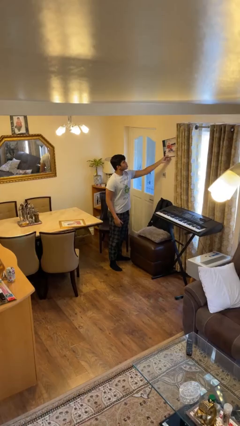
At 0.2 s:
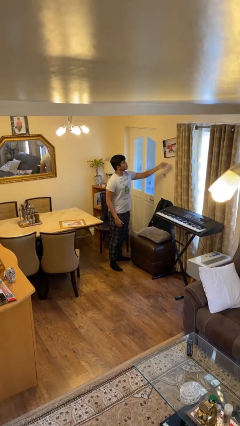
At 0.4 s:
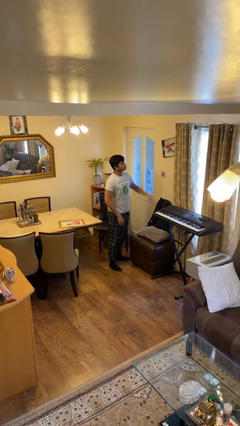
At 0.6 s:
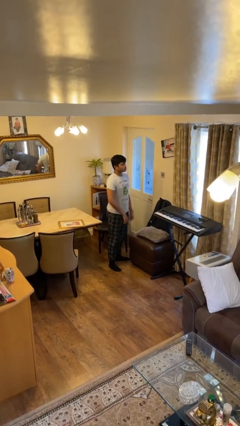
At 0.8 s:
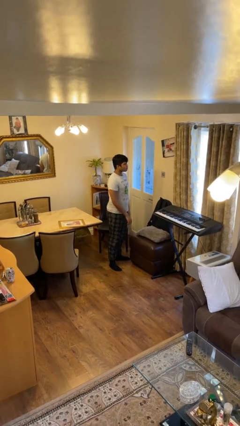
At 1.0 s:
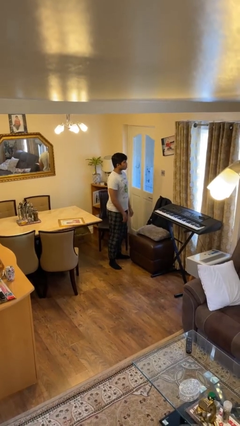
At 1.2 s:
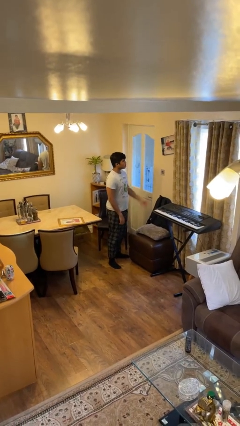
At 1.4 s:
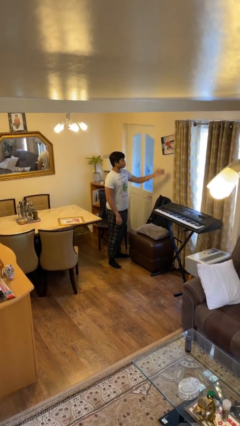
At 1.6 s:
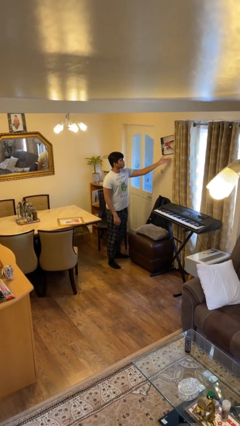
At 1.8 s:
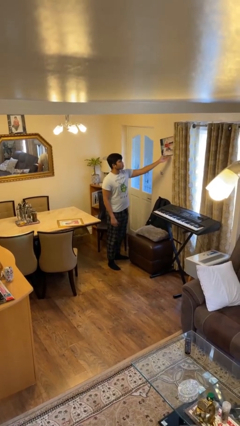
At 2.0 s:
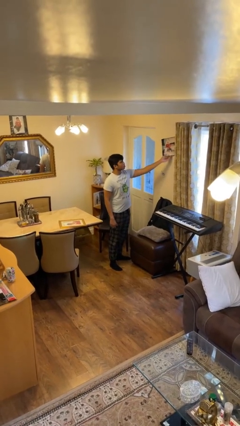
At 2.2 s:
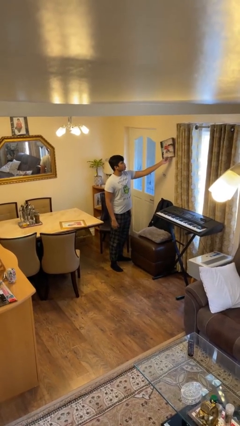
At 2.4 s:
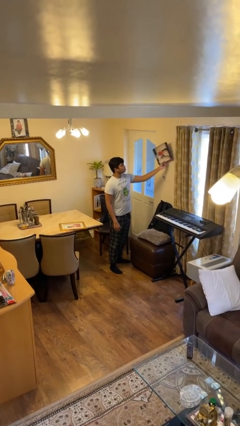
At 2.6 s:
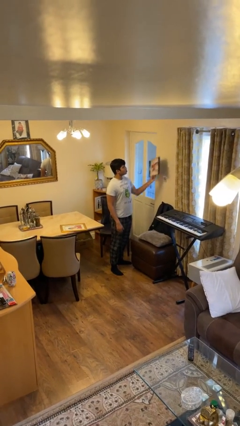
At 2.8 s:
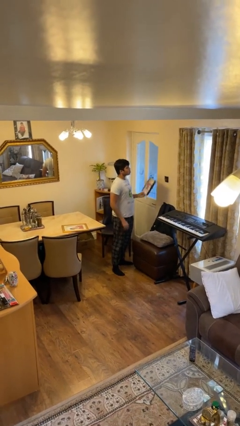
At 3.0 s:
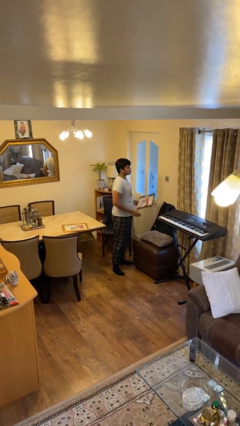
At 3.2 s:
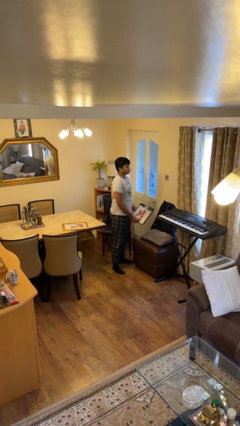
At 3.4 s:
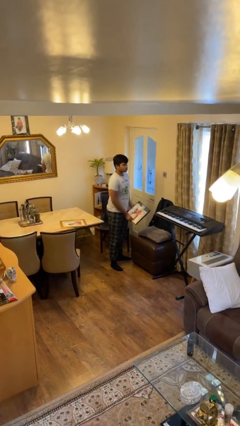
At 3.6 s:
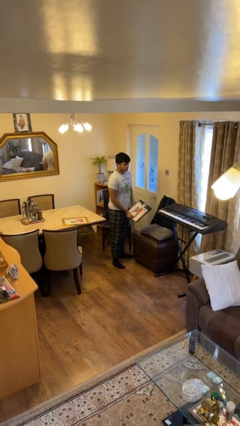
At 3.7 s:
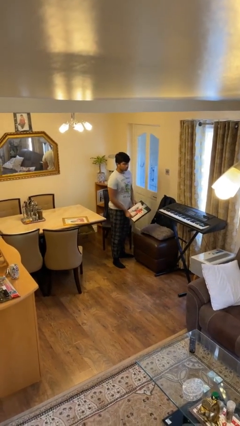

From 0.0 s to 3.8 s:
person puts up picture frame

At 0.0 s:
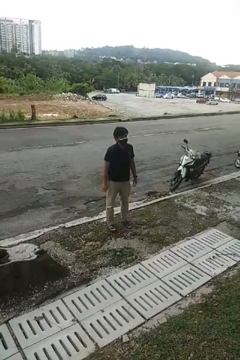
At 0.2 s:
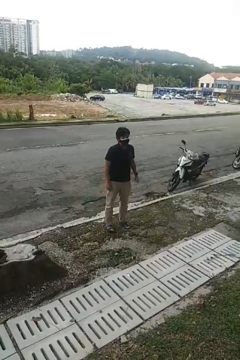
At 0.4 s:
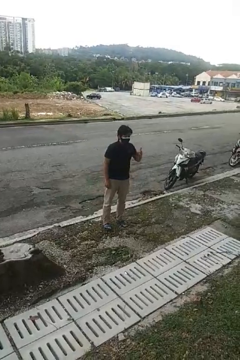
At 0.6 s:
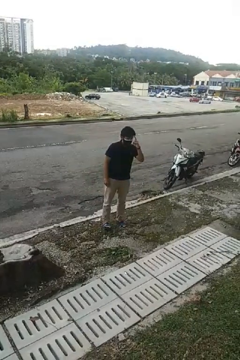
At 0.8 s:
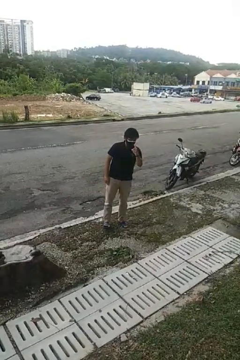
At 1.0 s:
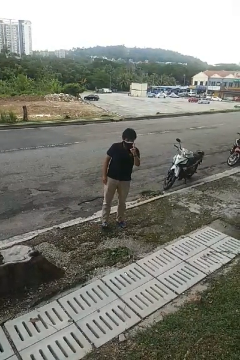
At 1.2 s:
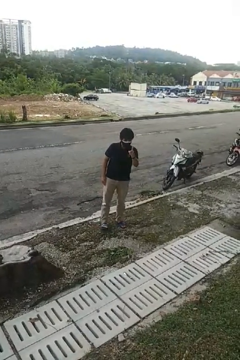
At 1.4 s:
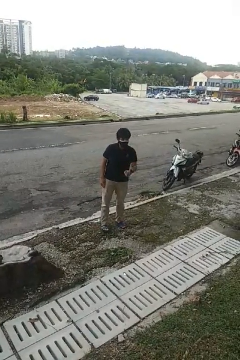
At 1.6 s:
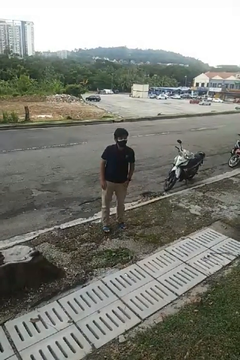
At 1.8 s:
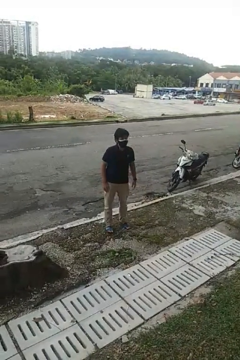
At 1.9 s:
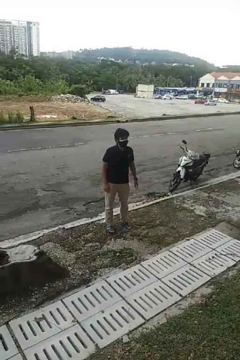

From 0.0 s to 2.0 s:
person gestures number one

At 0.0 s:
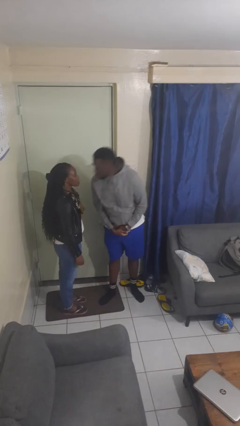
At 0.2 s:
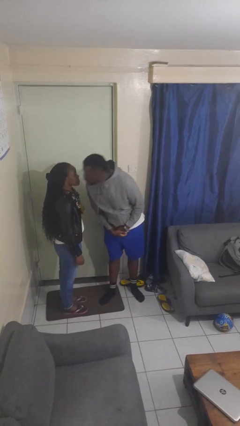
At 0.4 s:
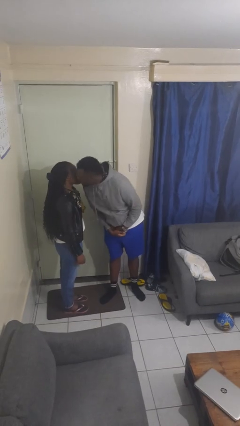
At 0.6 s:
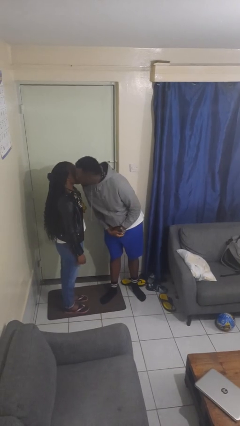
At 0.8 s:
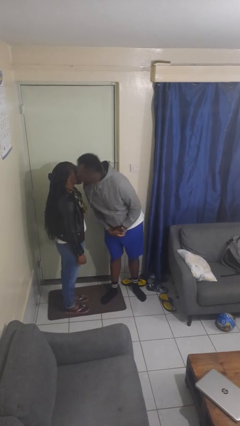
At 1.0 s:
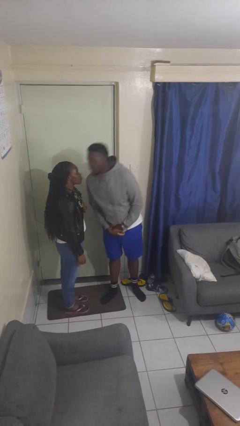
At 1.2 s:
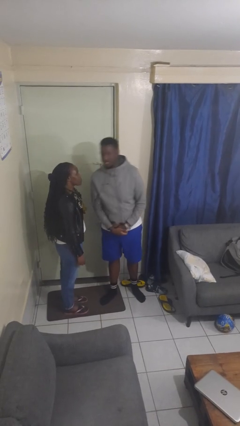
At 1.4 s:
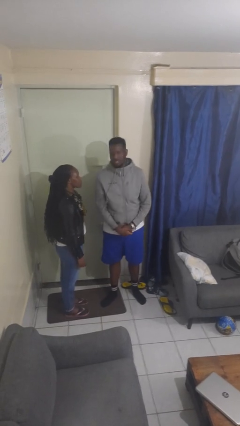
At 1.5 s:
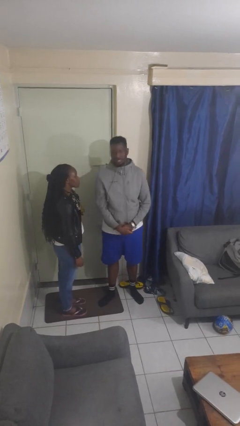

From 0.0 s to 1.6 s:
person kisses cheek of person

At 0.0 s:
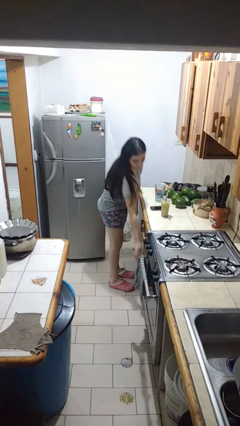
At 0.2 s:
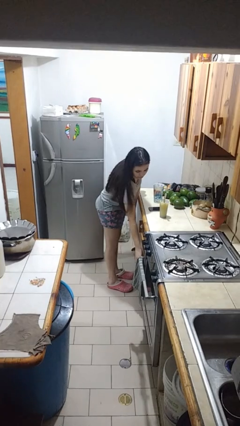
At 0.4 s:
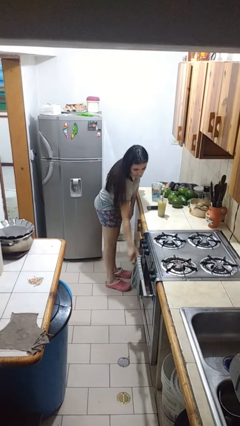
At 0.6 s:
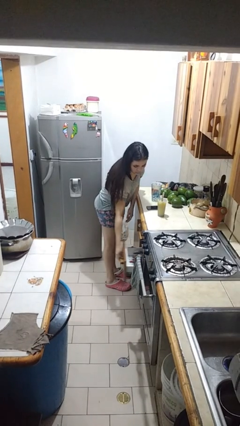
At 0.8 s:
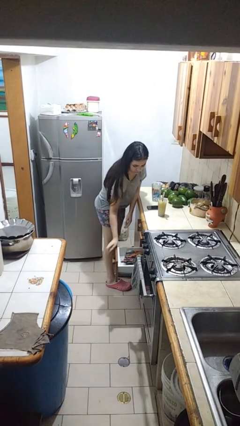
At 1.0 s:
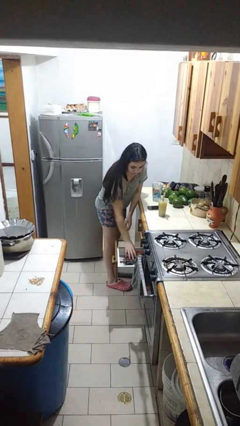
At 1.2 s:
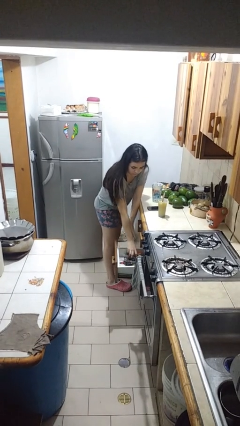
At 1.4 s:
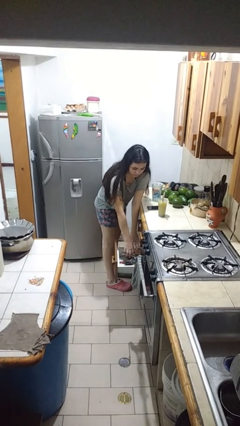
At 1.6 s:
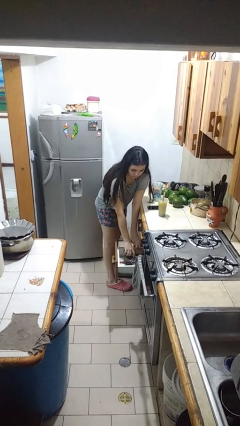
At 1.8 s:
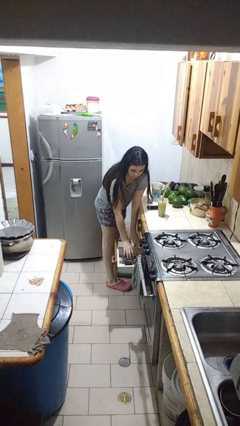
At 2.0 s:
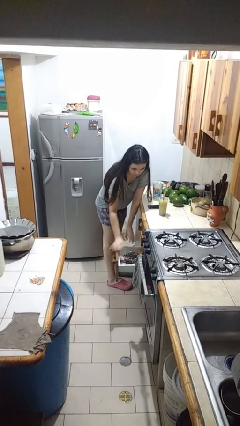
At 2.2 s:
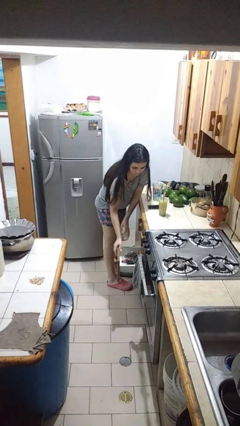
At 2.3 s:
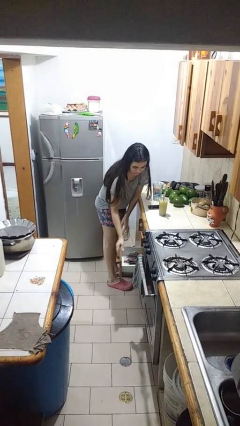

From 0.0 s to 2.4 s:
person searches in kitchen drawer

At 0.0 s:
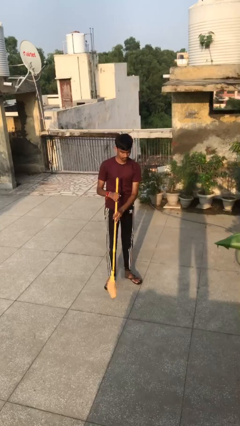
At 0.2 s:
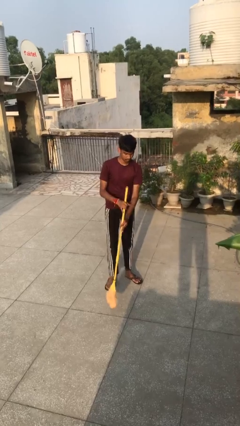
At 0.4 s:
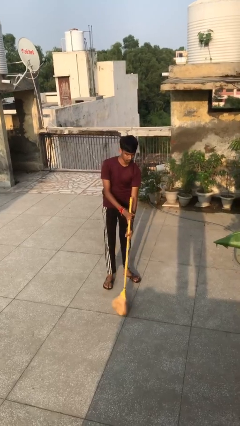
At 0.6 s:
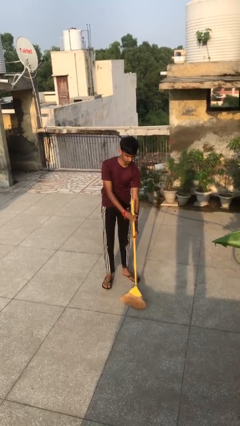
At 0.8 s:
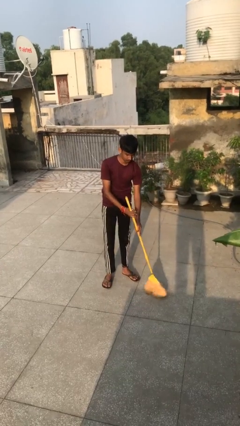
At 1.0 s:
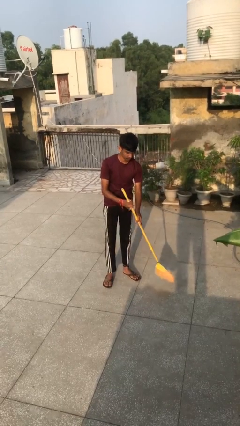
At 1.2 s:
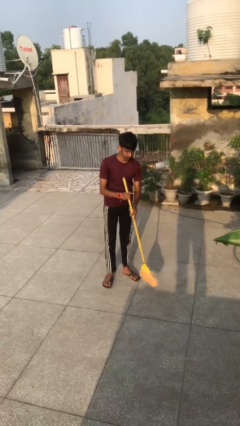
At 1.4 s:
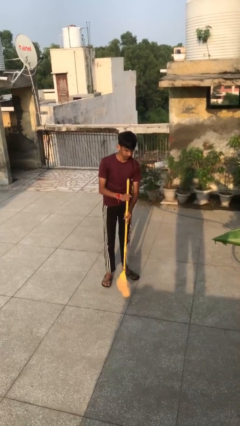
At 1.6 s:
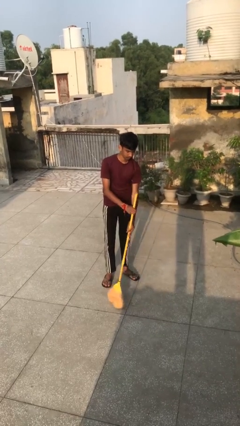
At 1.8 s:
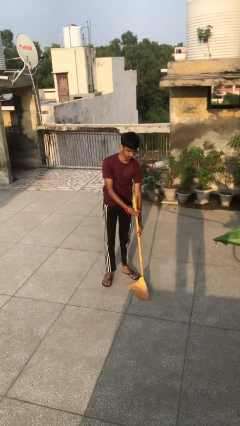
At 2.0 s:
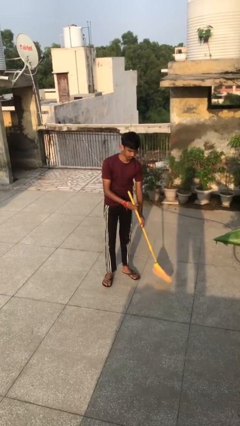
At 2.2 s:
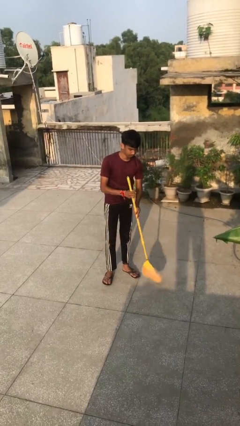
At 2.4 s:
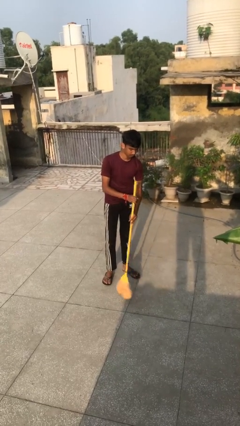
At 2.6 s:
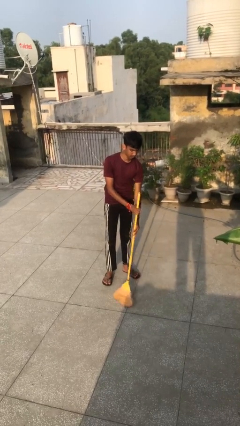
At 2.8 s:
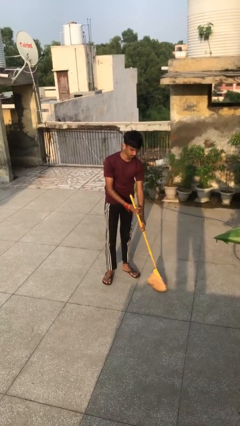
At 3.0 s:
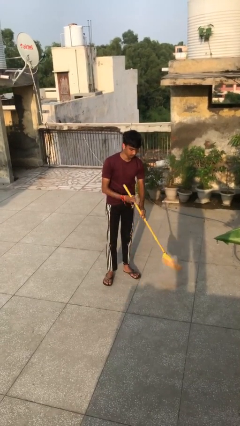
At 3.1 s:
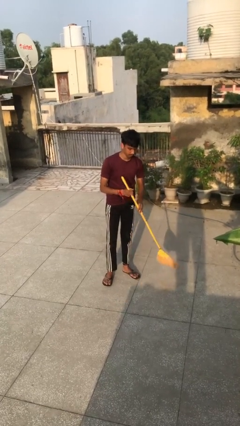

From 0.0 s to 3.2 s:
person sweeps floor

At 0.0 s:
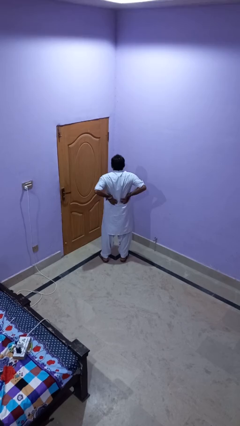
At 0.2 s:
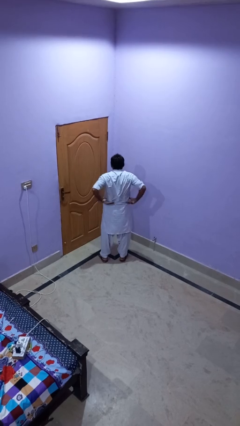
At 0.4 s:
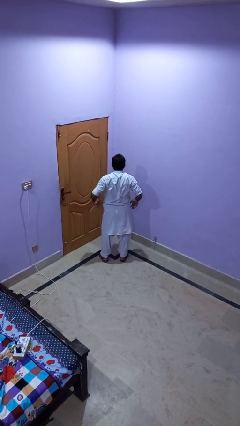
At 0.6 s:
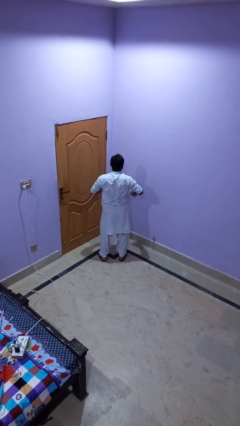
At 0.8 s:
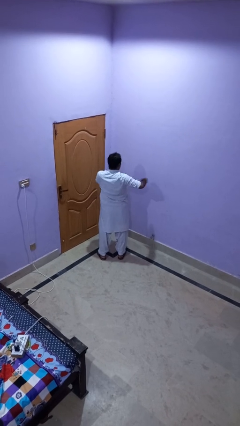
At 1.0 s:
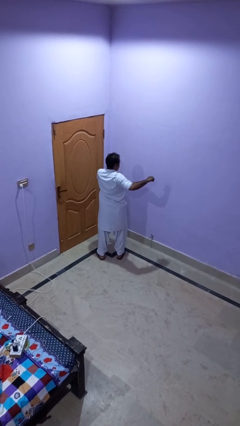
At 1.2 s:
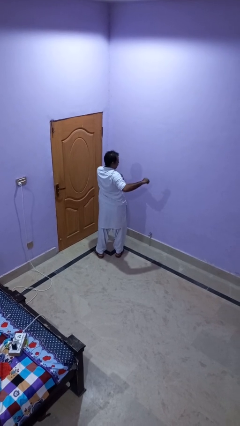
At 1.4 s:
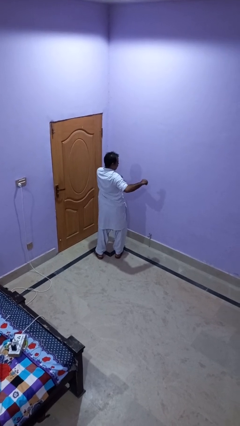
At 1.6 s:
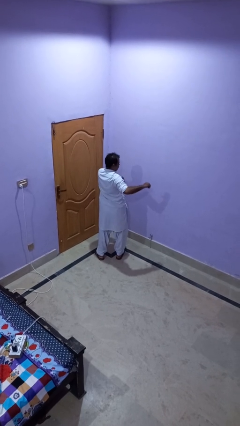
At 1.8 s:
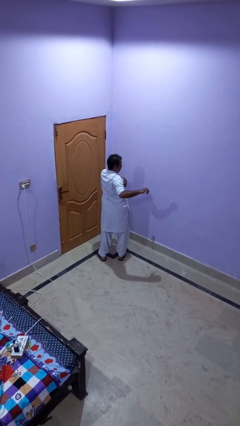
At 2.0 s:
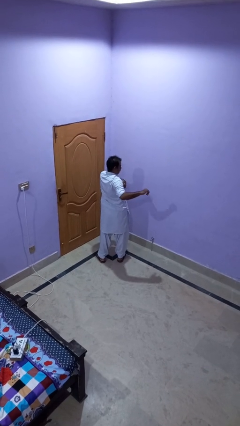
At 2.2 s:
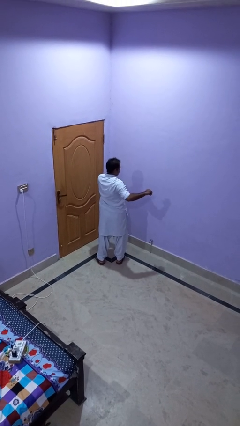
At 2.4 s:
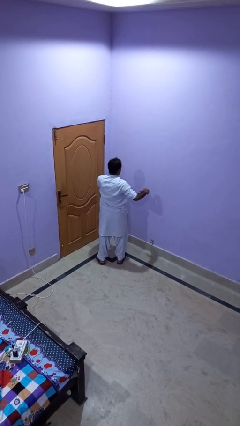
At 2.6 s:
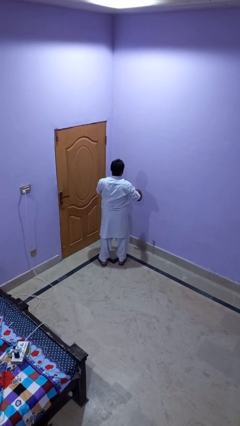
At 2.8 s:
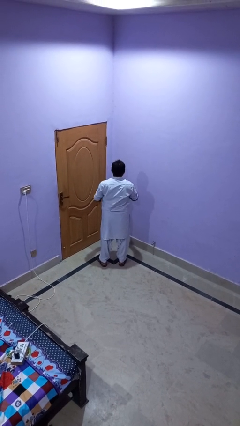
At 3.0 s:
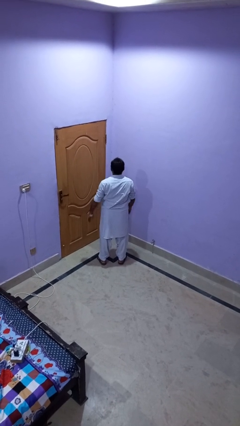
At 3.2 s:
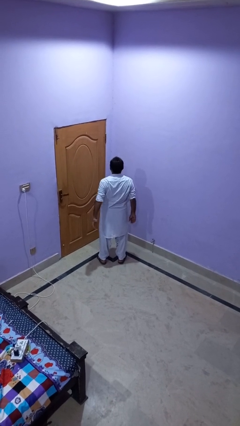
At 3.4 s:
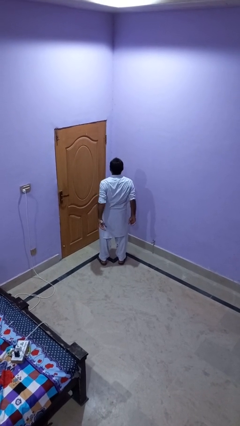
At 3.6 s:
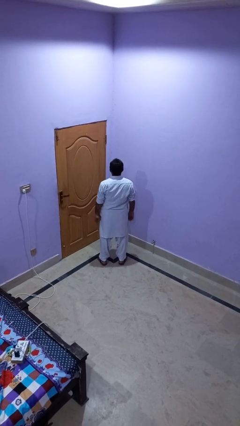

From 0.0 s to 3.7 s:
person stretches arms to side

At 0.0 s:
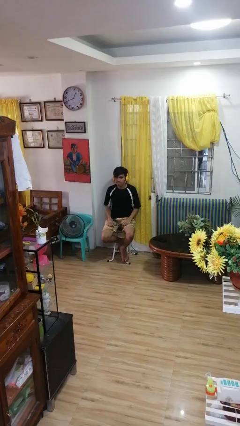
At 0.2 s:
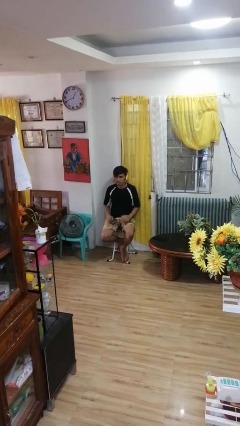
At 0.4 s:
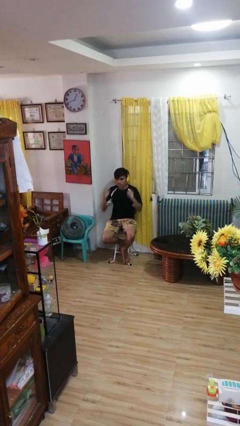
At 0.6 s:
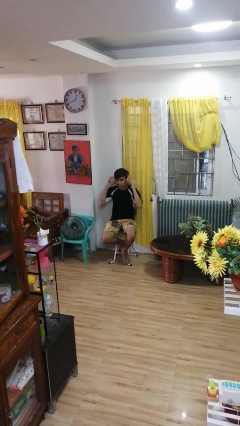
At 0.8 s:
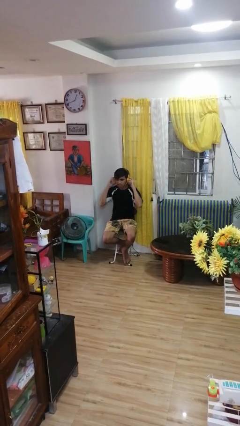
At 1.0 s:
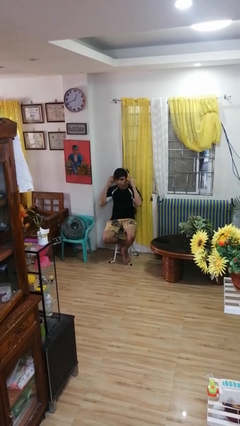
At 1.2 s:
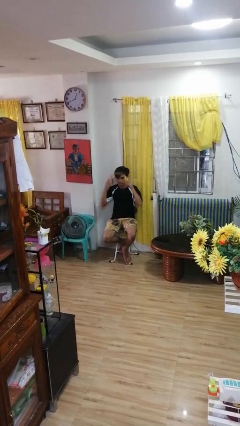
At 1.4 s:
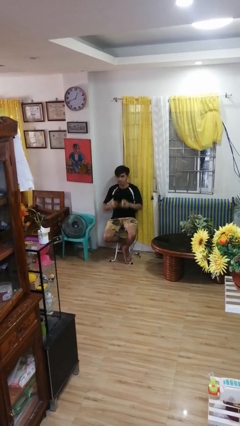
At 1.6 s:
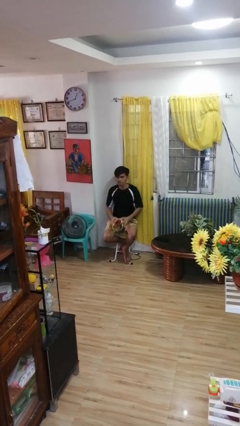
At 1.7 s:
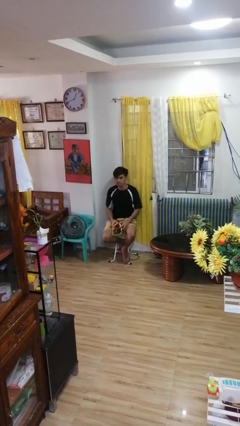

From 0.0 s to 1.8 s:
person takes off headphones
